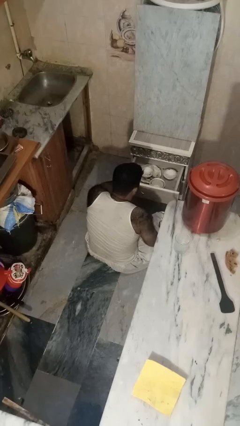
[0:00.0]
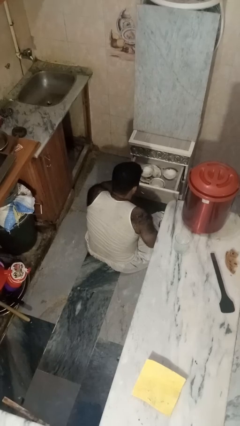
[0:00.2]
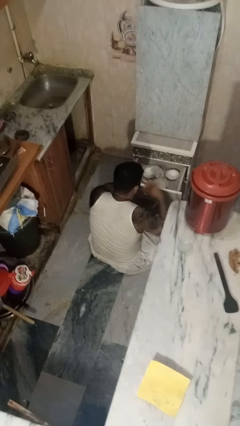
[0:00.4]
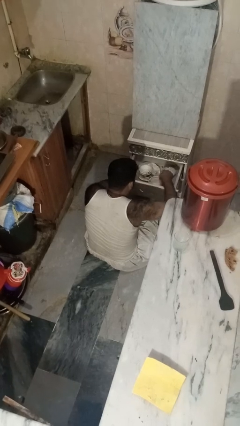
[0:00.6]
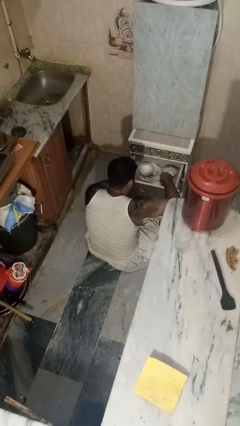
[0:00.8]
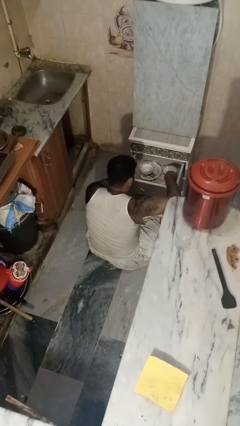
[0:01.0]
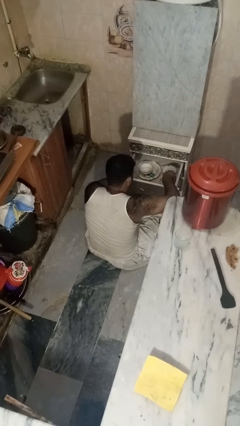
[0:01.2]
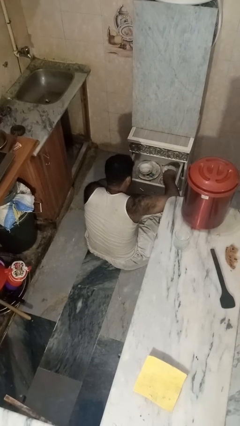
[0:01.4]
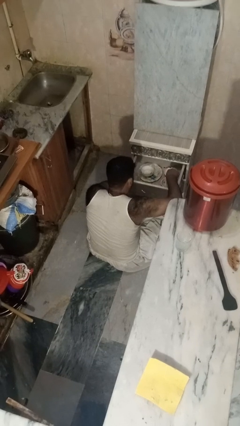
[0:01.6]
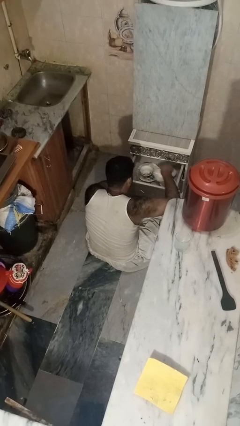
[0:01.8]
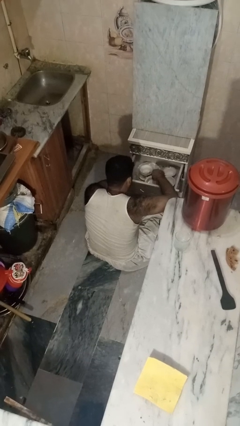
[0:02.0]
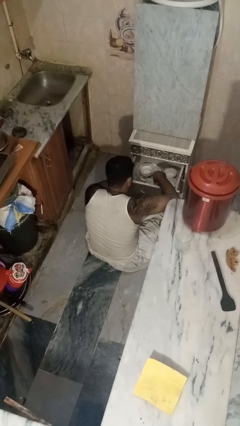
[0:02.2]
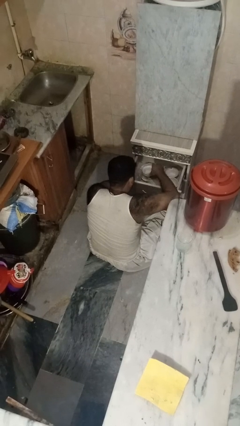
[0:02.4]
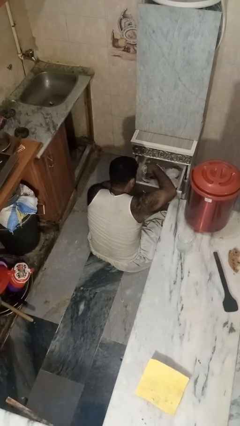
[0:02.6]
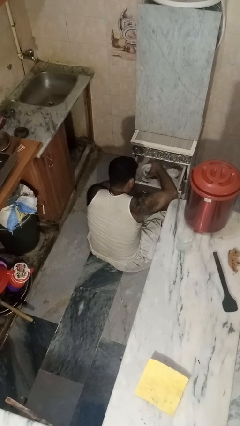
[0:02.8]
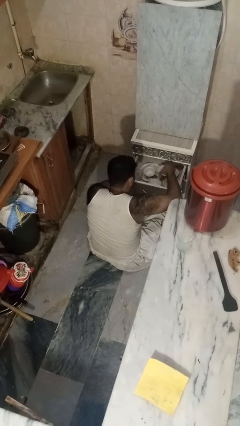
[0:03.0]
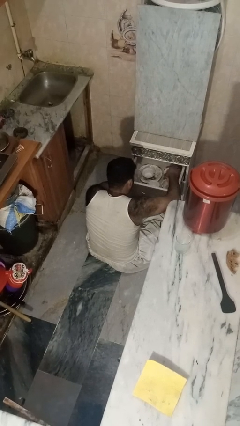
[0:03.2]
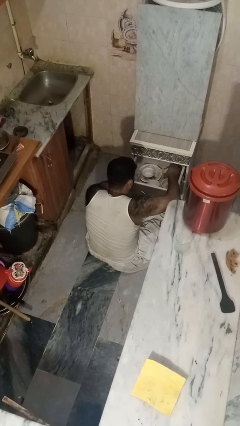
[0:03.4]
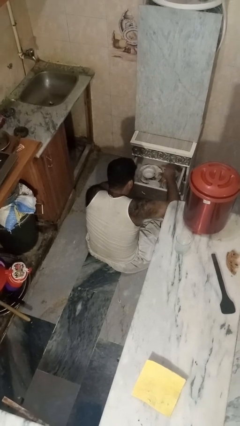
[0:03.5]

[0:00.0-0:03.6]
person searches in kitchen drawer

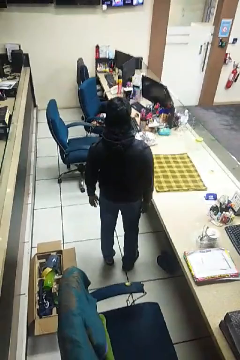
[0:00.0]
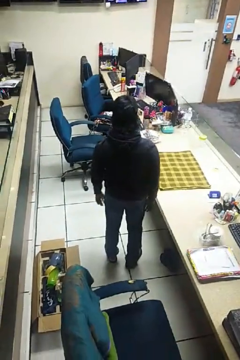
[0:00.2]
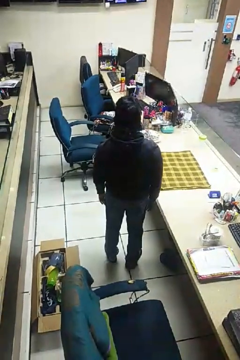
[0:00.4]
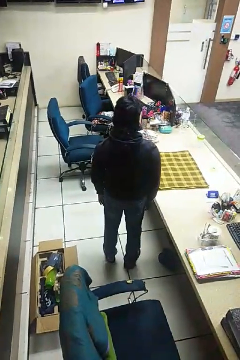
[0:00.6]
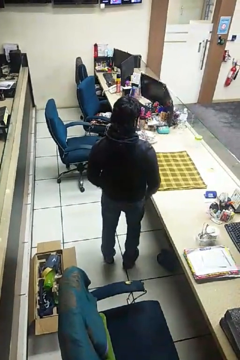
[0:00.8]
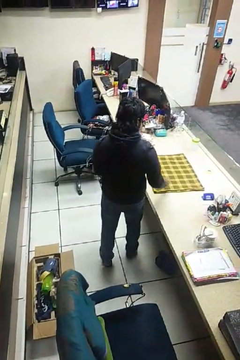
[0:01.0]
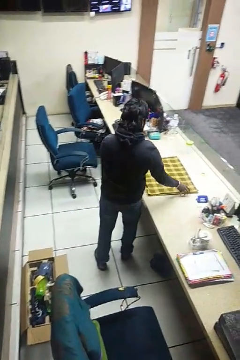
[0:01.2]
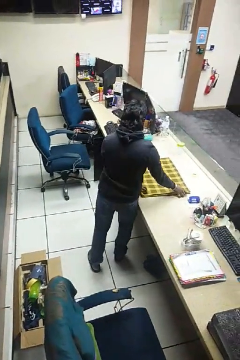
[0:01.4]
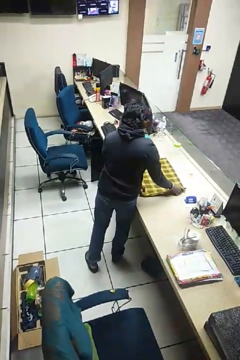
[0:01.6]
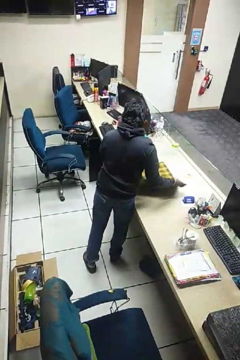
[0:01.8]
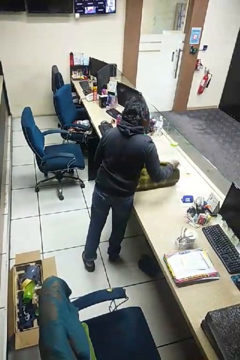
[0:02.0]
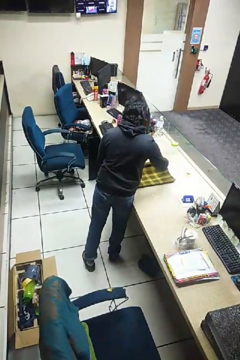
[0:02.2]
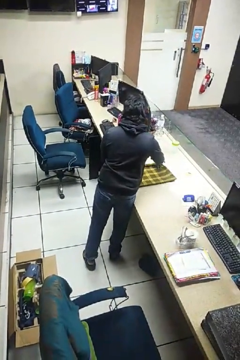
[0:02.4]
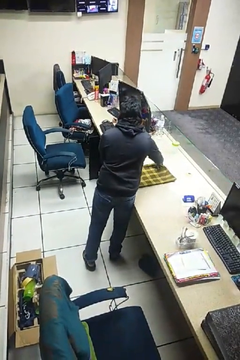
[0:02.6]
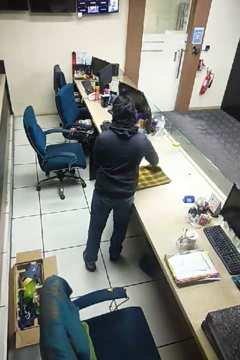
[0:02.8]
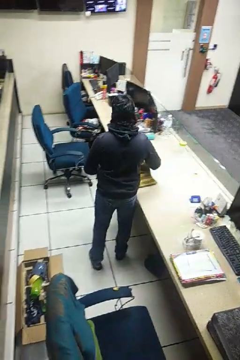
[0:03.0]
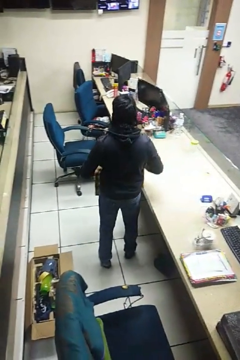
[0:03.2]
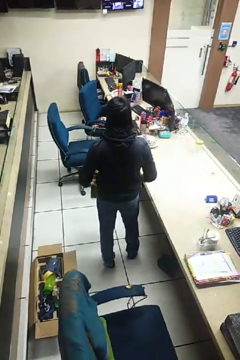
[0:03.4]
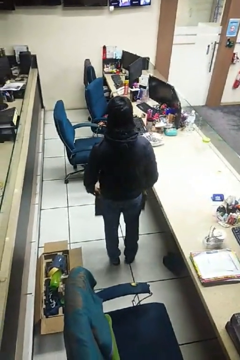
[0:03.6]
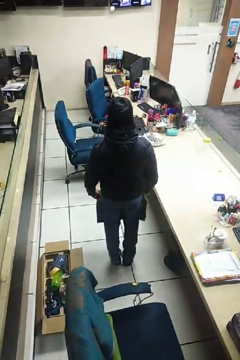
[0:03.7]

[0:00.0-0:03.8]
person folds tablecloth

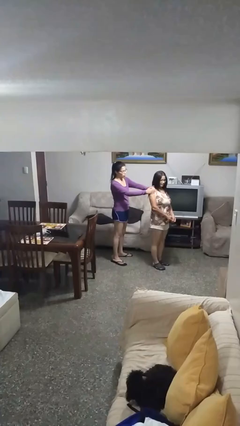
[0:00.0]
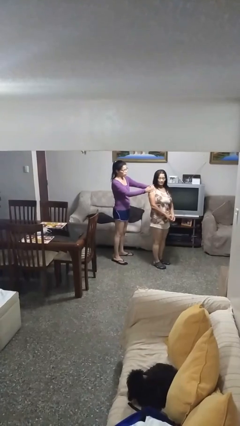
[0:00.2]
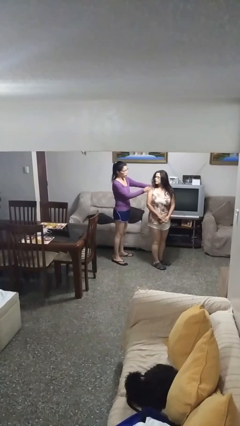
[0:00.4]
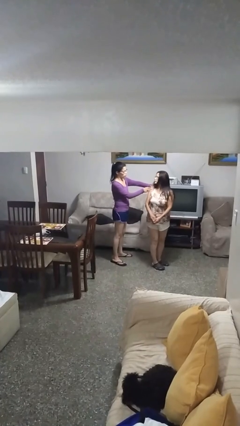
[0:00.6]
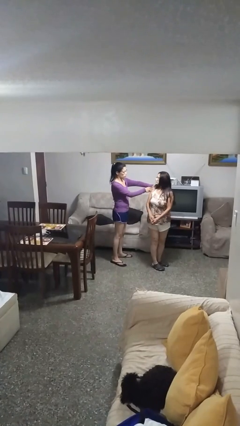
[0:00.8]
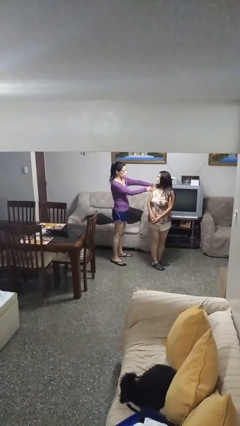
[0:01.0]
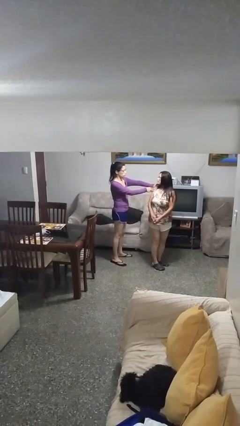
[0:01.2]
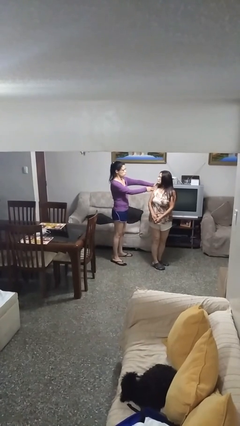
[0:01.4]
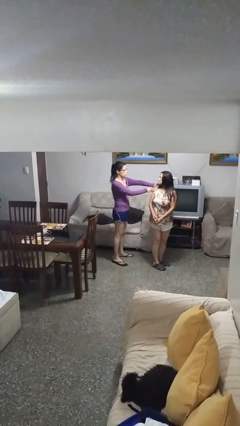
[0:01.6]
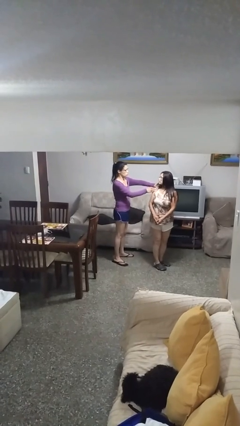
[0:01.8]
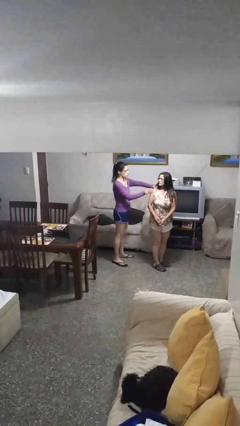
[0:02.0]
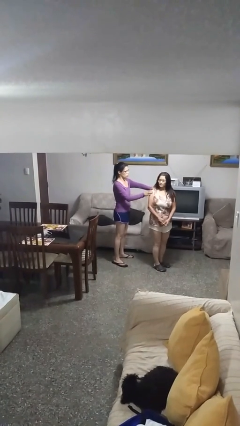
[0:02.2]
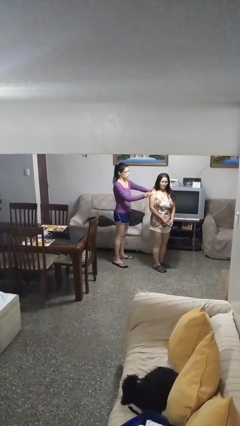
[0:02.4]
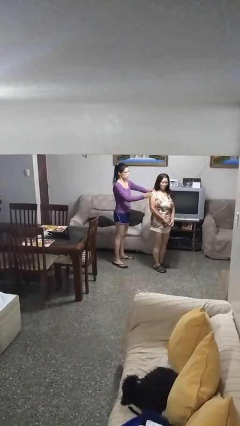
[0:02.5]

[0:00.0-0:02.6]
person spins person around

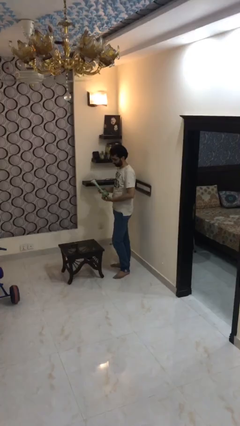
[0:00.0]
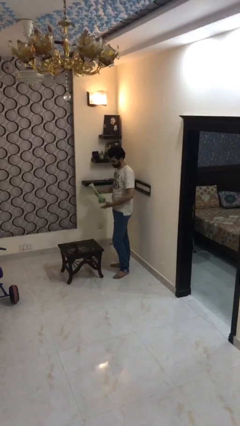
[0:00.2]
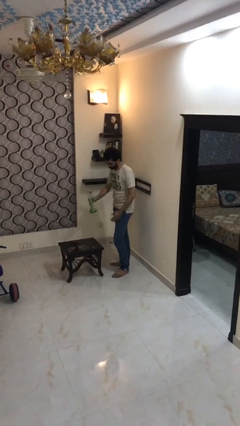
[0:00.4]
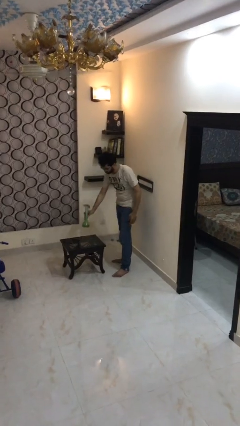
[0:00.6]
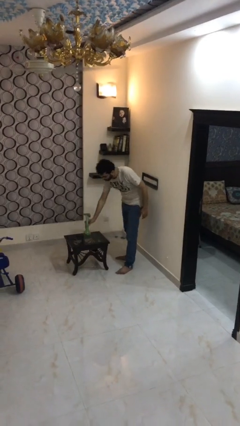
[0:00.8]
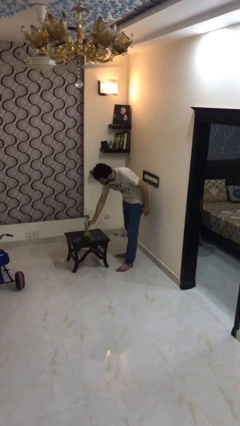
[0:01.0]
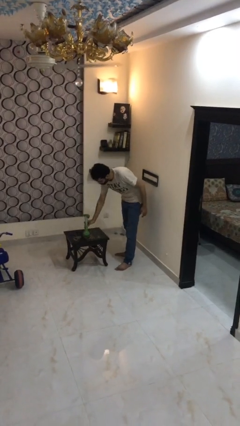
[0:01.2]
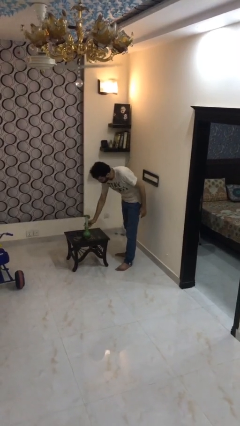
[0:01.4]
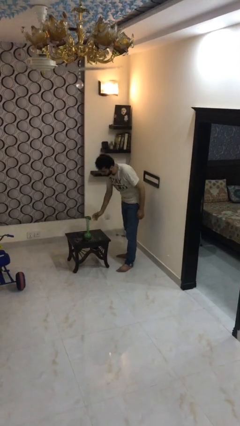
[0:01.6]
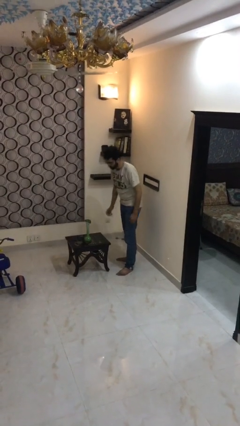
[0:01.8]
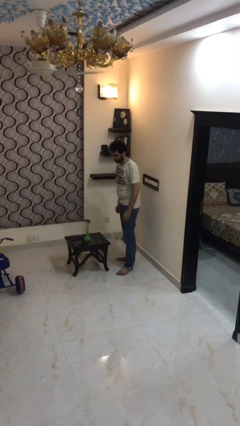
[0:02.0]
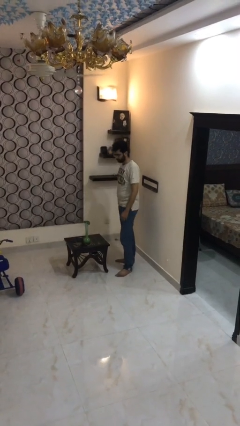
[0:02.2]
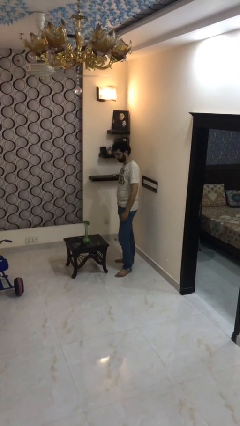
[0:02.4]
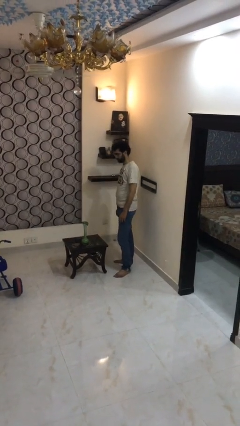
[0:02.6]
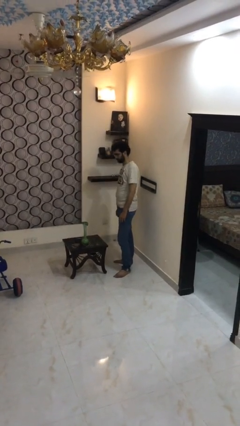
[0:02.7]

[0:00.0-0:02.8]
person puts down object on table

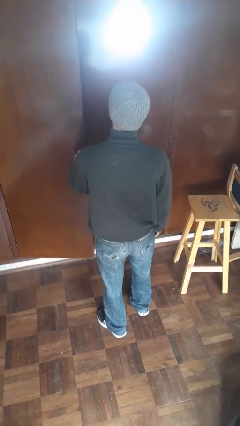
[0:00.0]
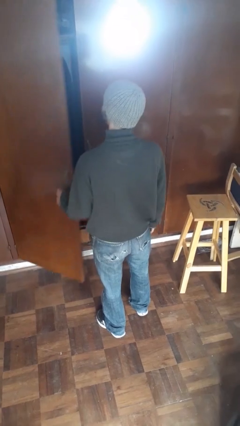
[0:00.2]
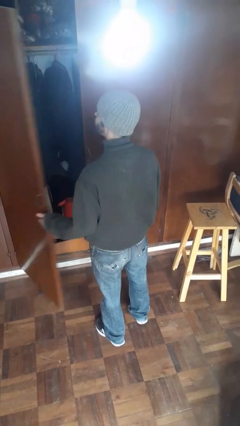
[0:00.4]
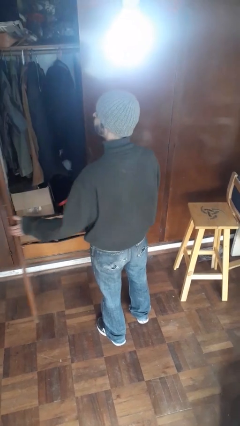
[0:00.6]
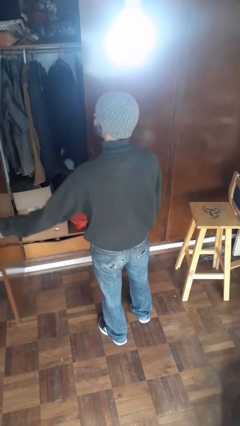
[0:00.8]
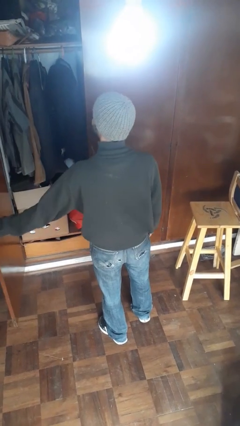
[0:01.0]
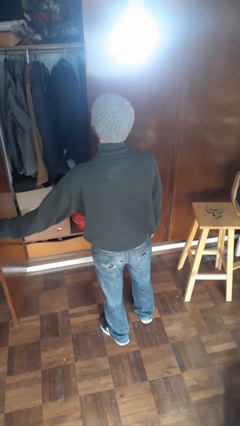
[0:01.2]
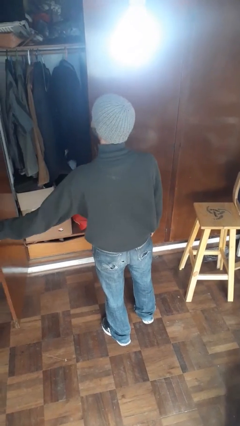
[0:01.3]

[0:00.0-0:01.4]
person opens closet door

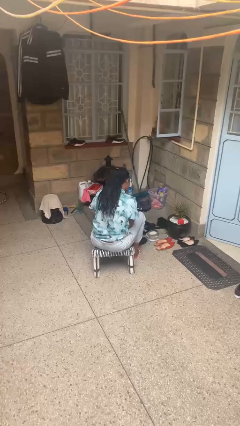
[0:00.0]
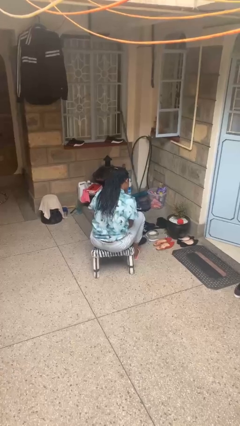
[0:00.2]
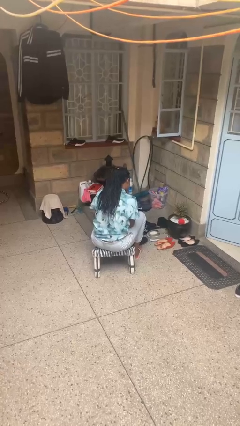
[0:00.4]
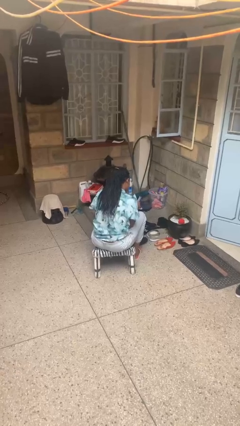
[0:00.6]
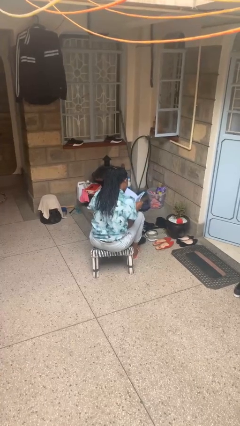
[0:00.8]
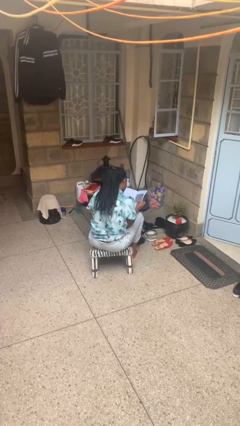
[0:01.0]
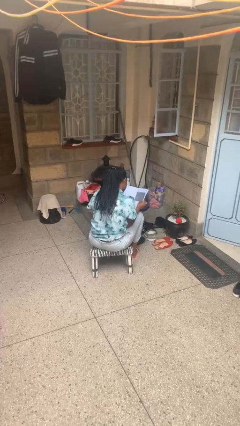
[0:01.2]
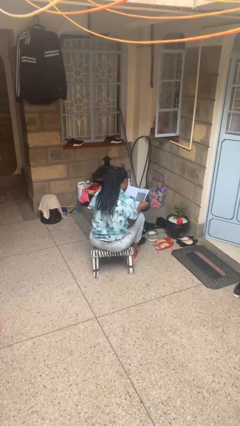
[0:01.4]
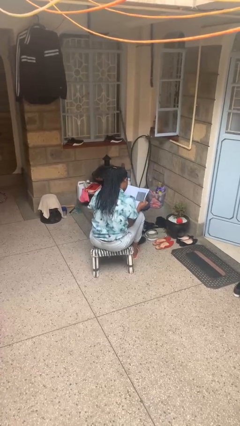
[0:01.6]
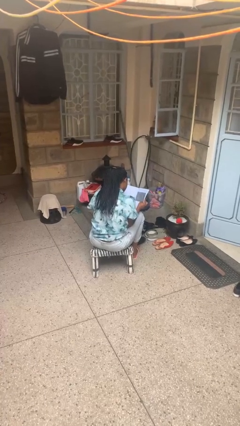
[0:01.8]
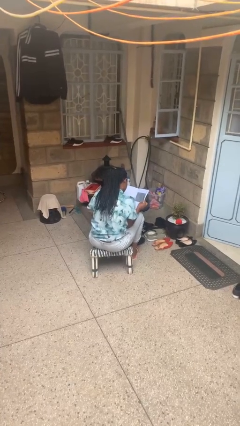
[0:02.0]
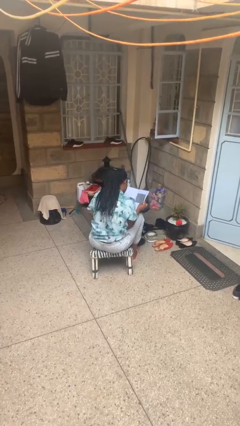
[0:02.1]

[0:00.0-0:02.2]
person reads magazine

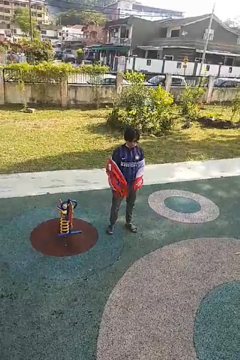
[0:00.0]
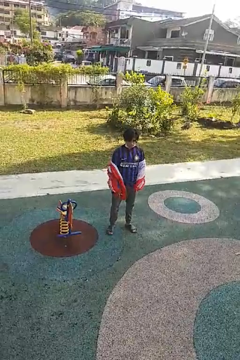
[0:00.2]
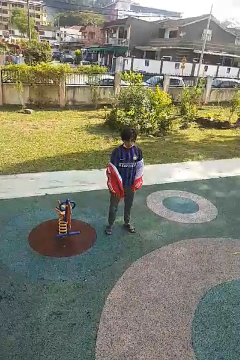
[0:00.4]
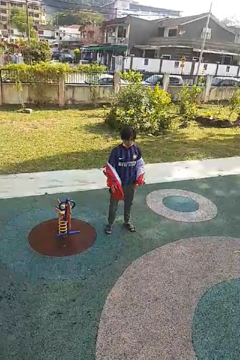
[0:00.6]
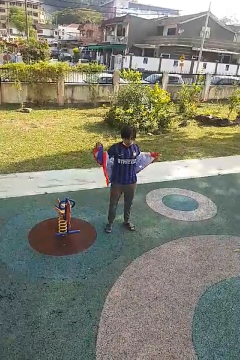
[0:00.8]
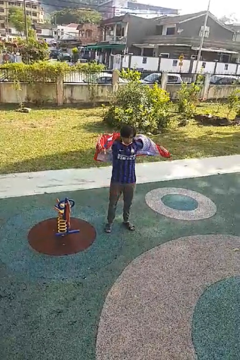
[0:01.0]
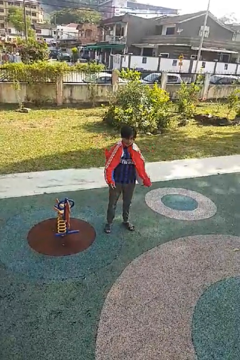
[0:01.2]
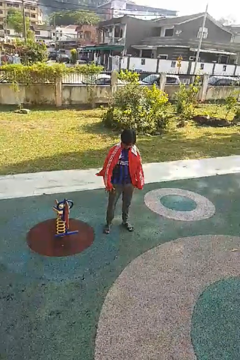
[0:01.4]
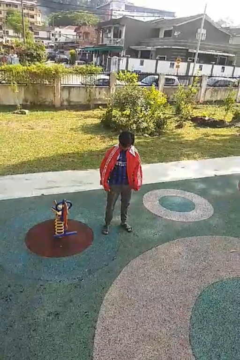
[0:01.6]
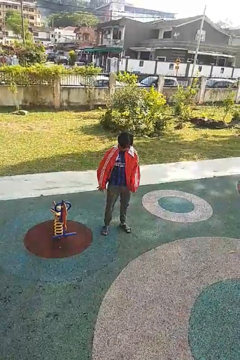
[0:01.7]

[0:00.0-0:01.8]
person puts on jacket
